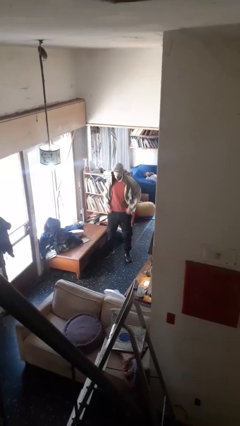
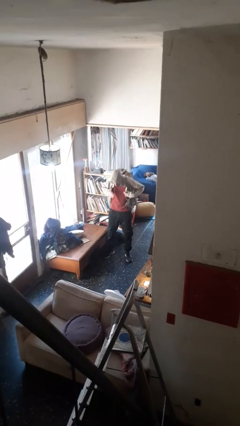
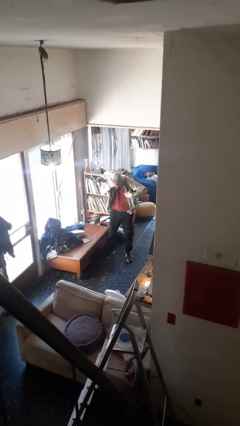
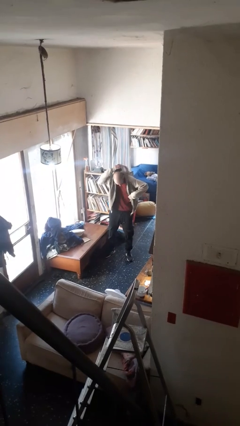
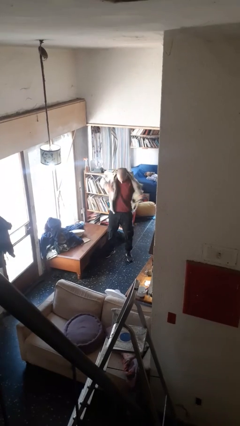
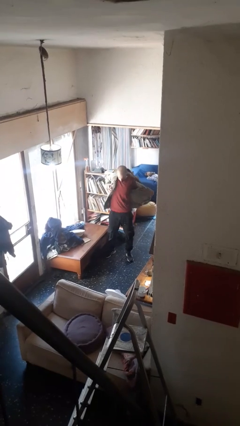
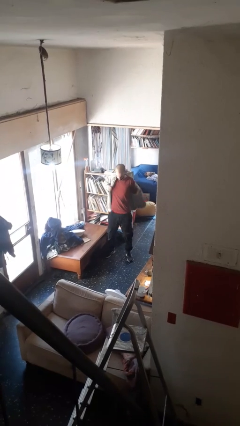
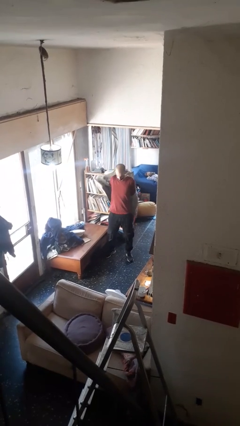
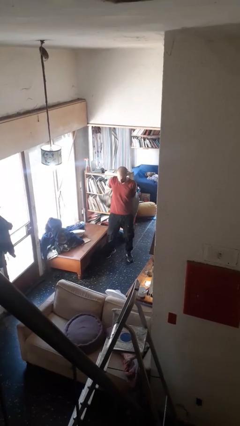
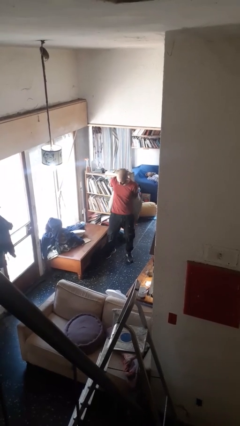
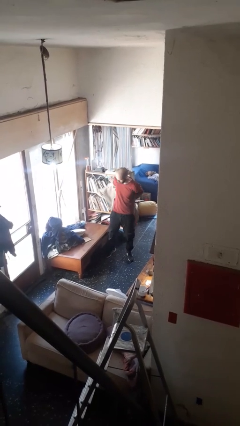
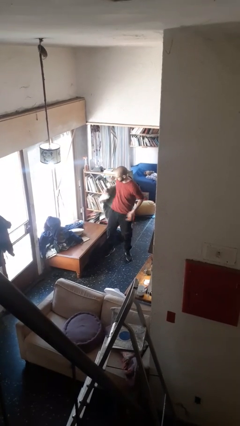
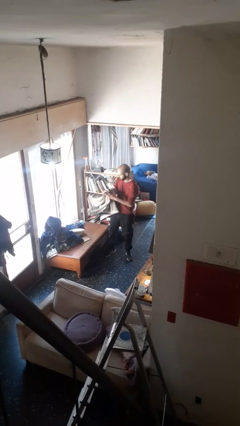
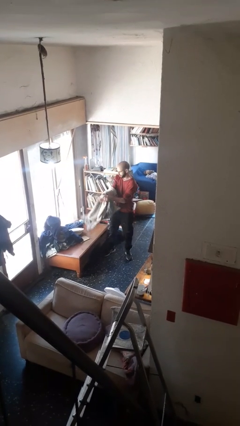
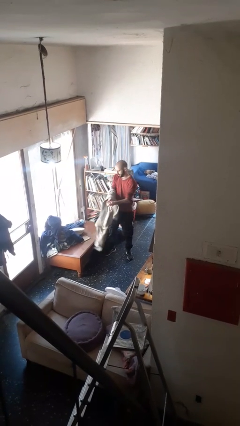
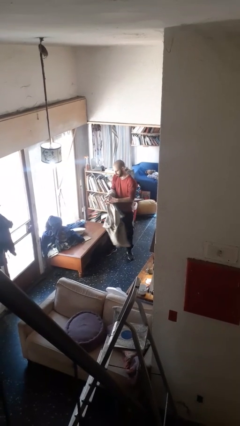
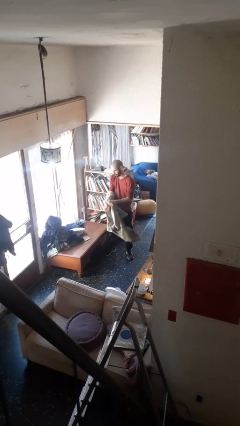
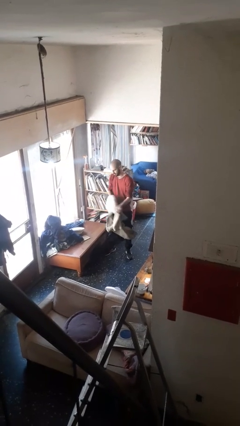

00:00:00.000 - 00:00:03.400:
person takes off hoodie

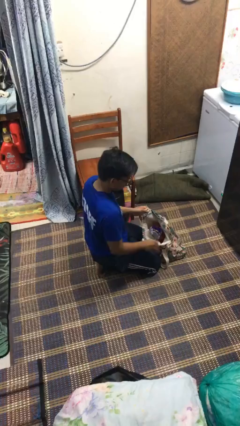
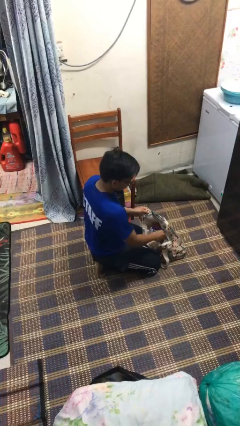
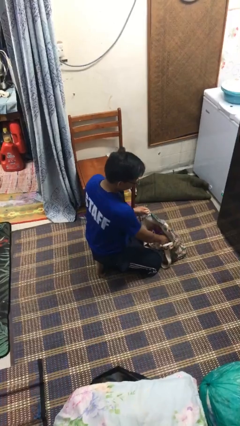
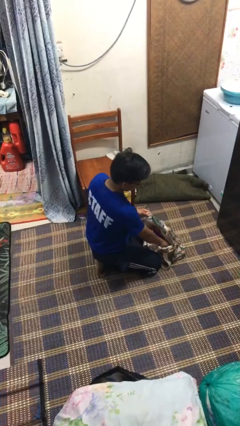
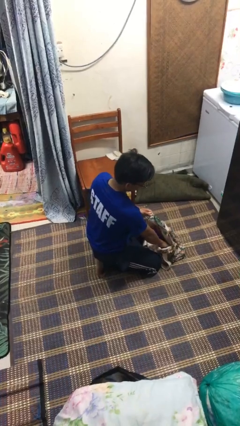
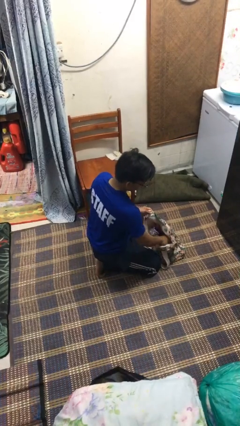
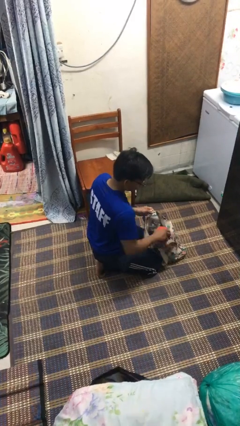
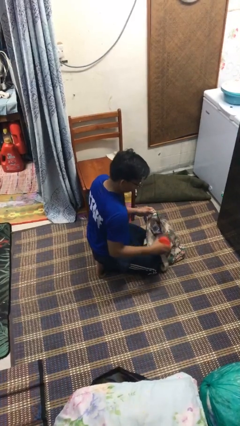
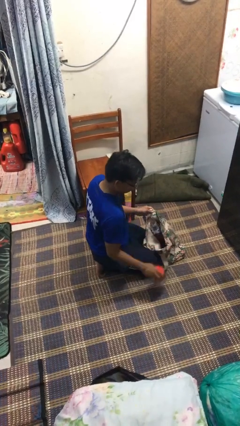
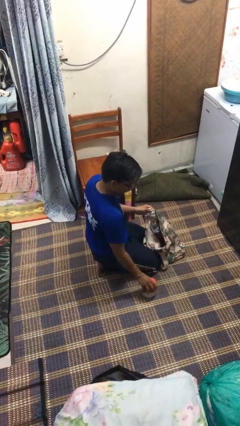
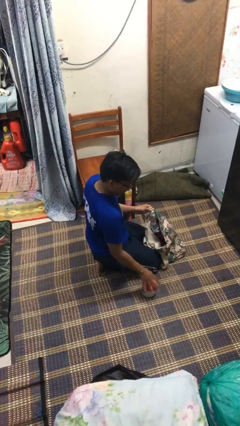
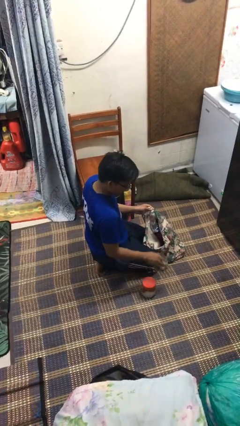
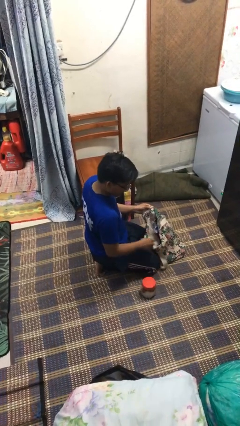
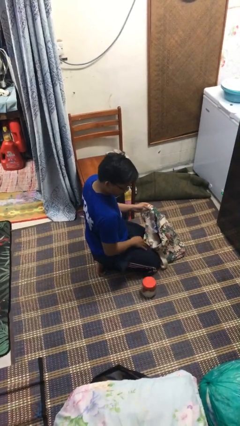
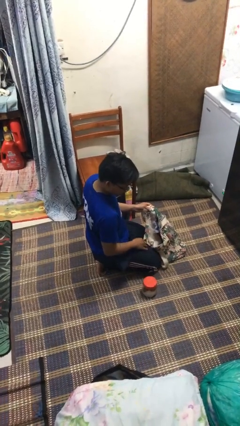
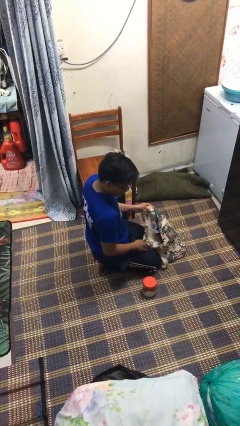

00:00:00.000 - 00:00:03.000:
person takes object from bag

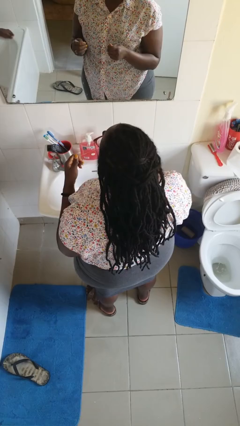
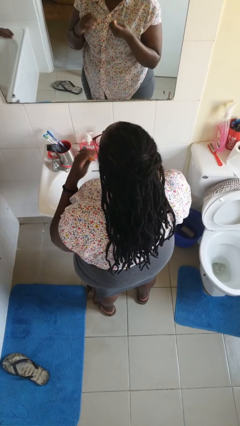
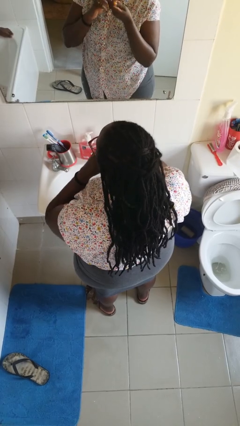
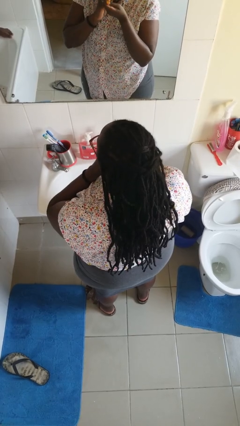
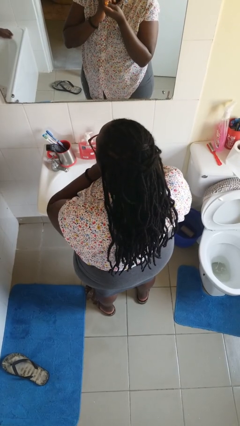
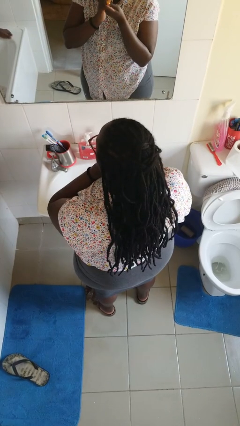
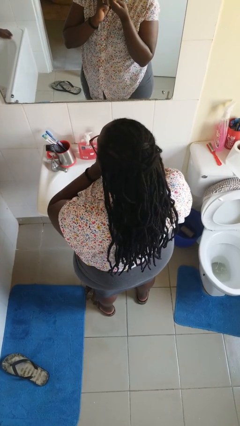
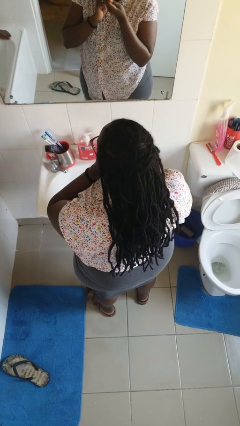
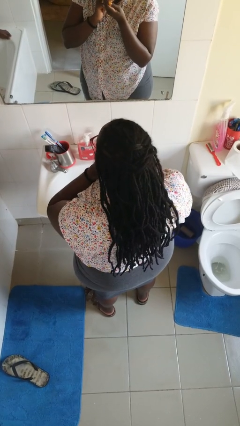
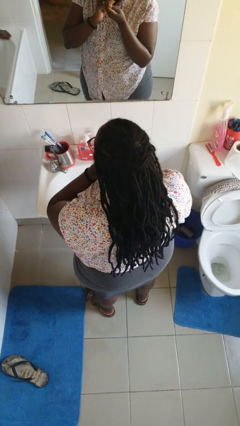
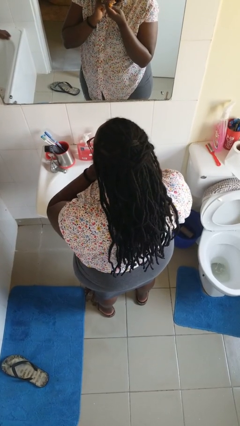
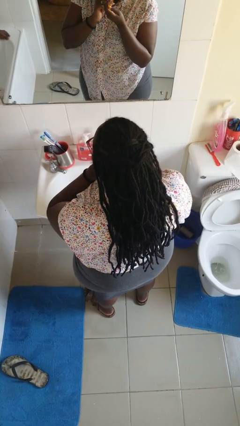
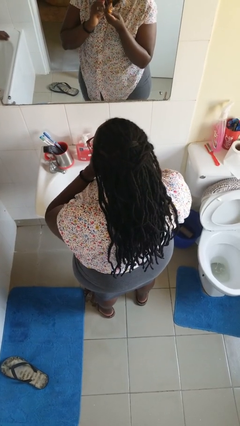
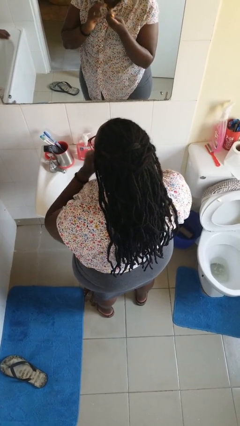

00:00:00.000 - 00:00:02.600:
person flosses

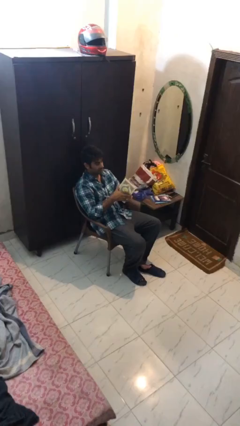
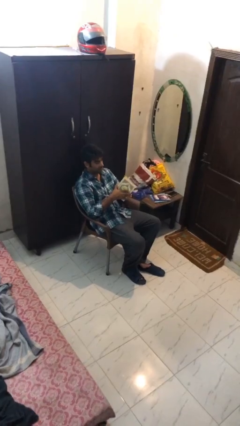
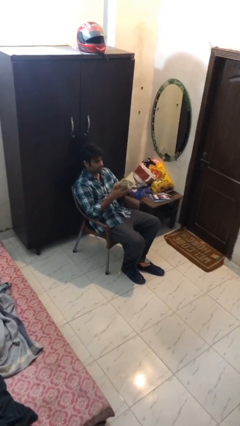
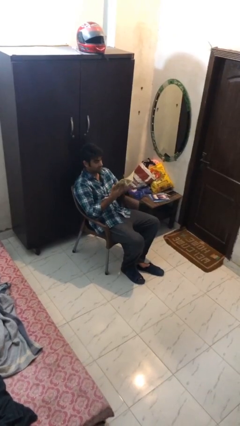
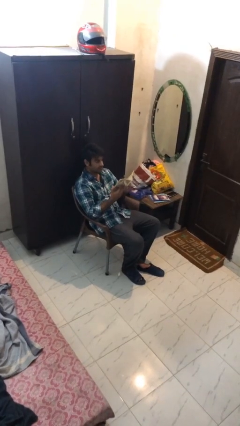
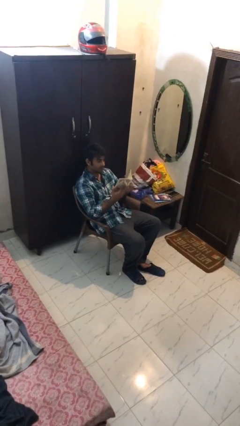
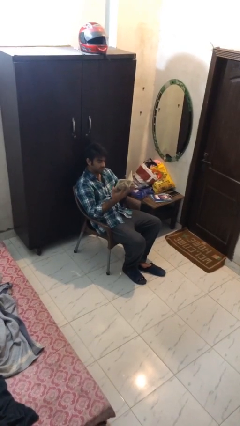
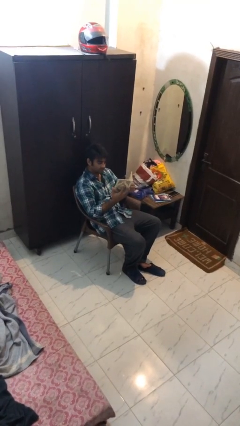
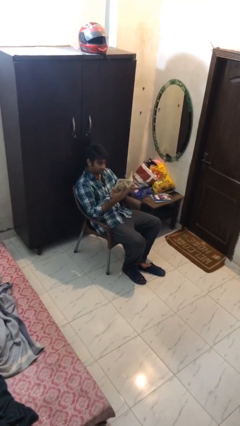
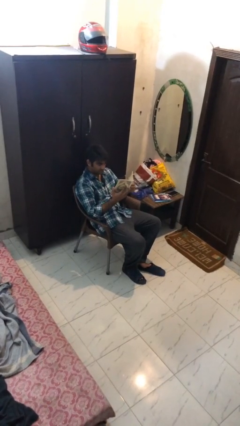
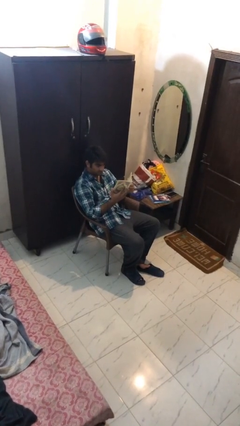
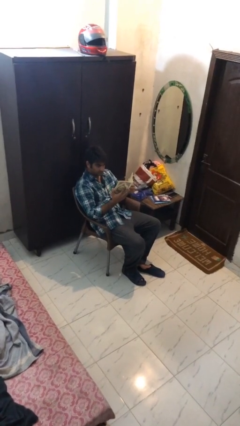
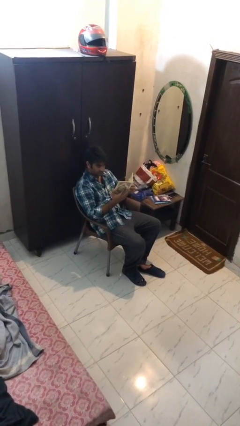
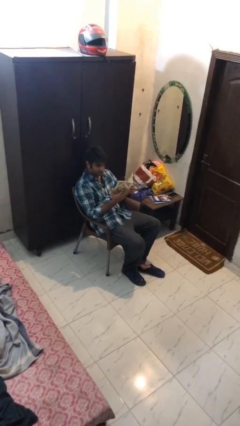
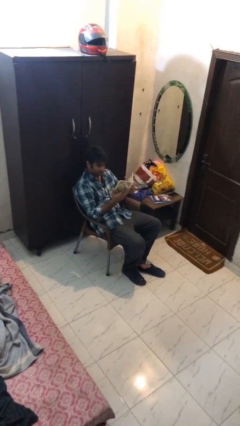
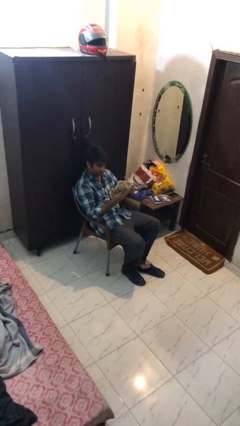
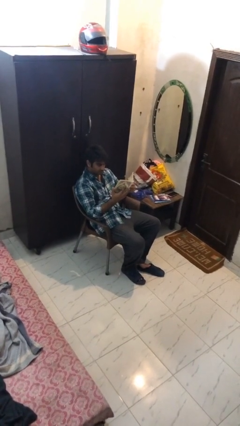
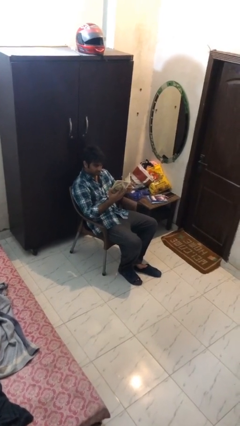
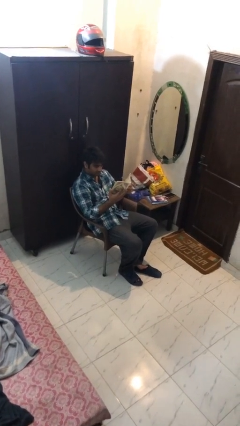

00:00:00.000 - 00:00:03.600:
person reads document

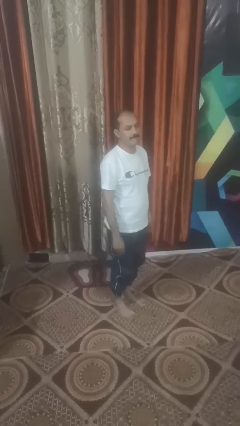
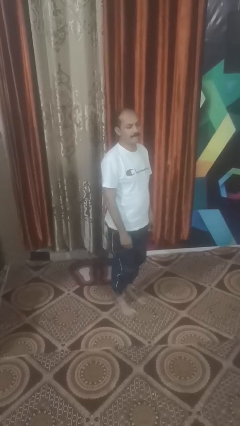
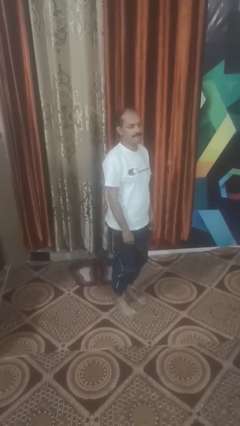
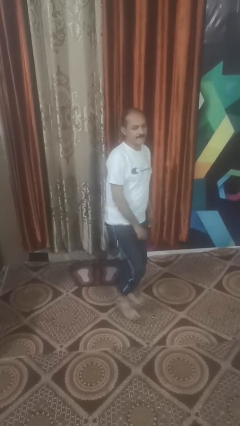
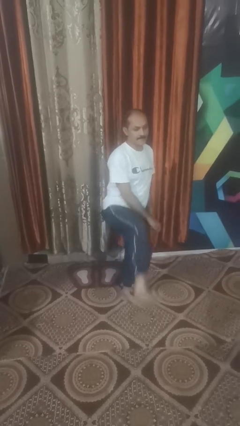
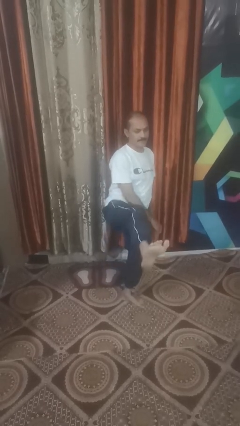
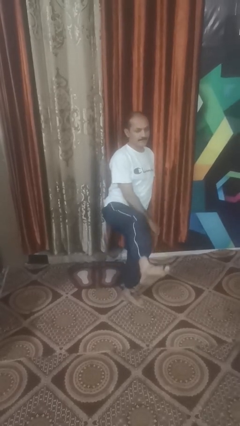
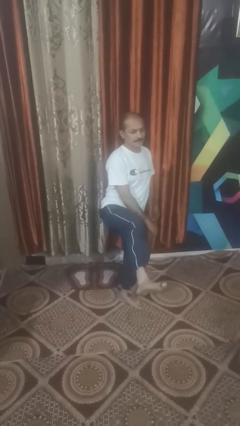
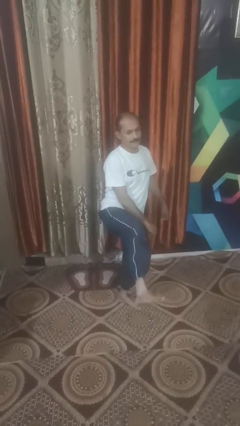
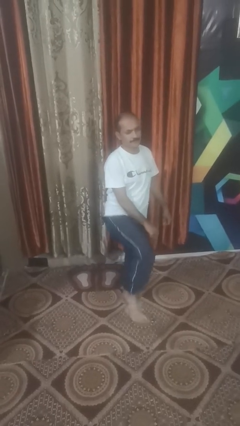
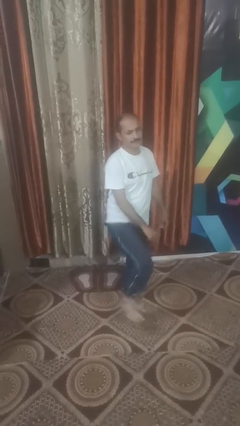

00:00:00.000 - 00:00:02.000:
person karate kicks

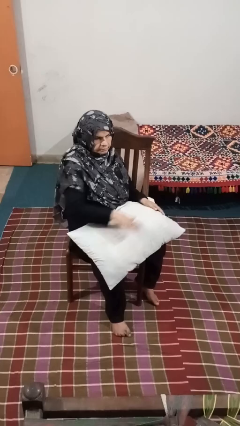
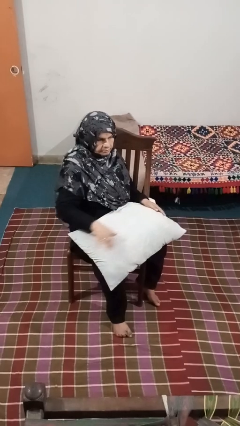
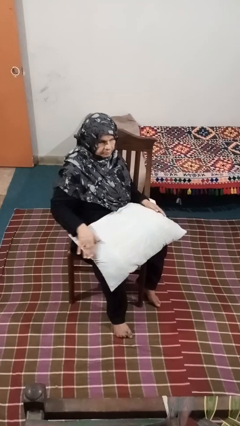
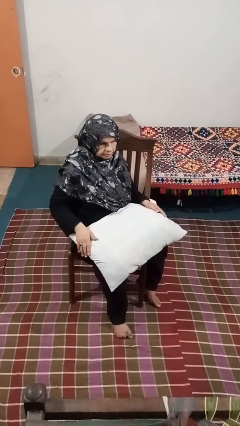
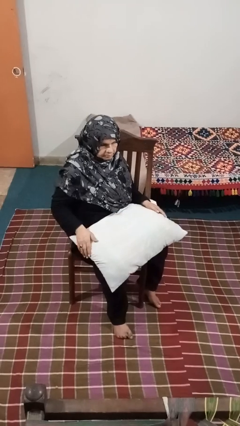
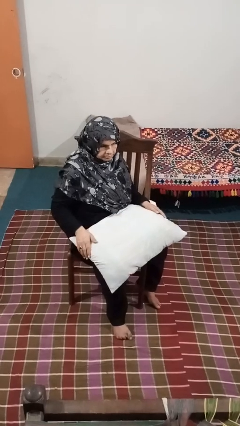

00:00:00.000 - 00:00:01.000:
person waves hand over object

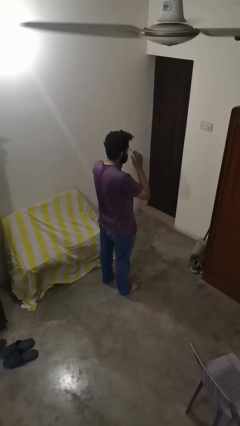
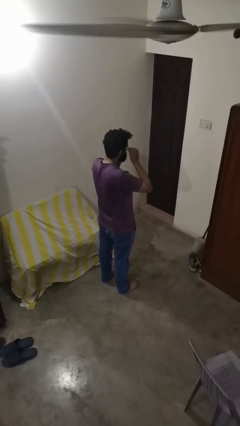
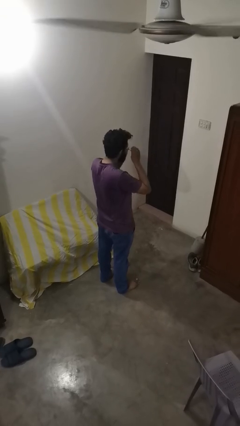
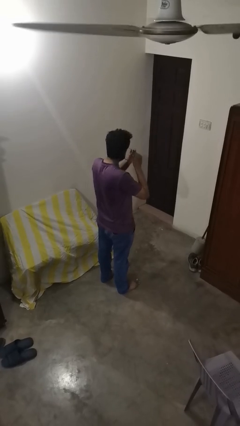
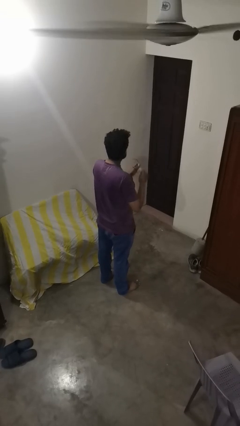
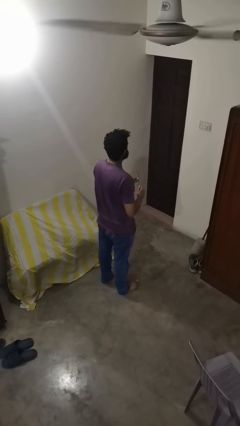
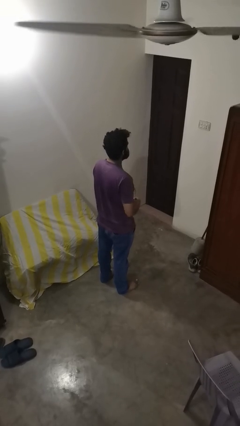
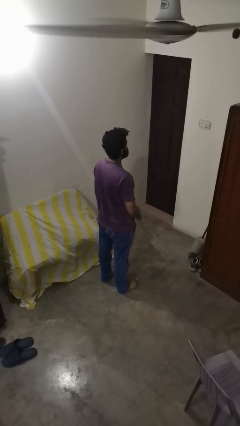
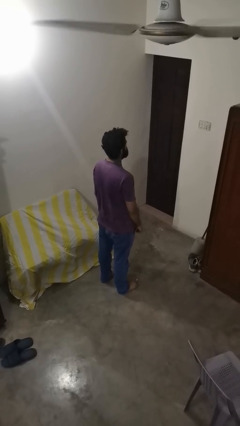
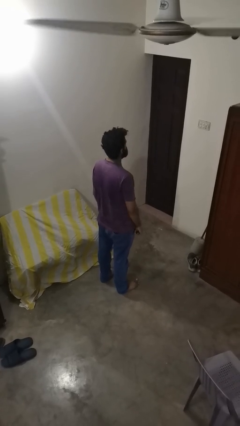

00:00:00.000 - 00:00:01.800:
person takes off glasses
